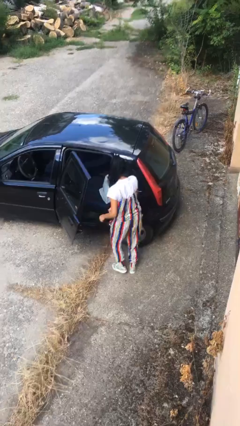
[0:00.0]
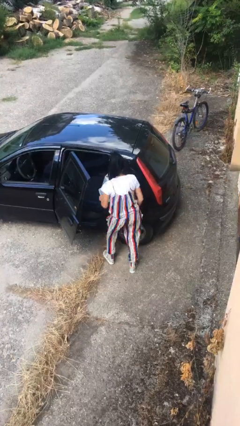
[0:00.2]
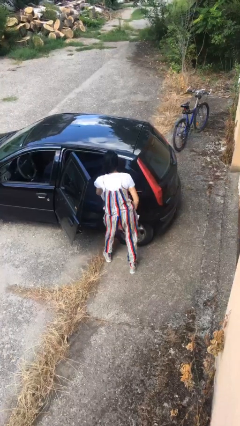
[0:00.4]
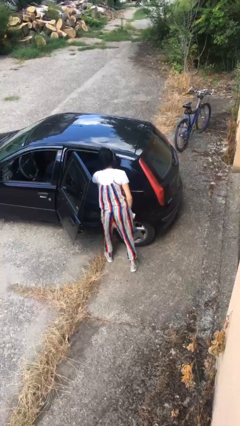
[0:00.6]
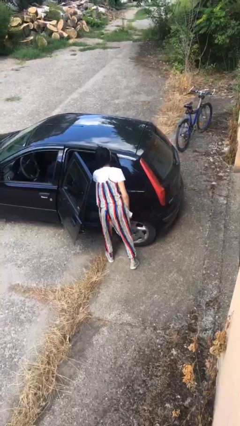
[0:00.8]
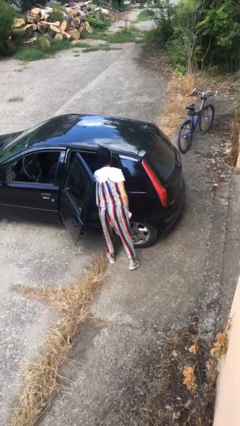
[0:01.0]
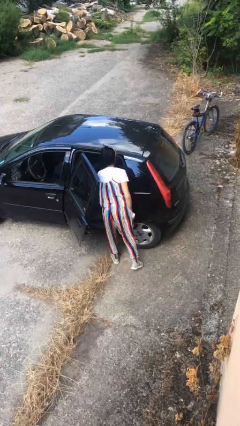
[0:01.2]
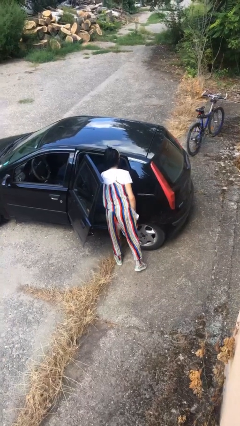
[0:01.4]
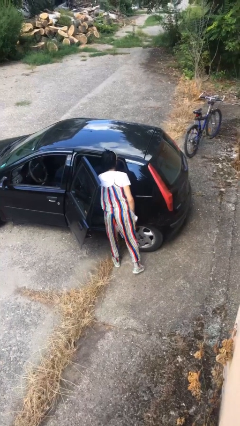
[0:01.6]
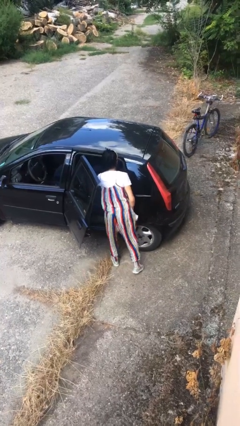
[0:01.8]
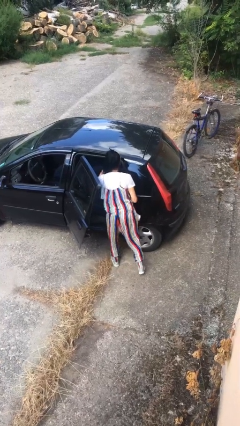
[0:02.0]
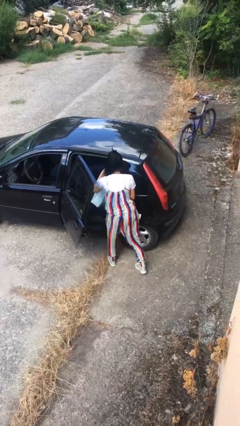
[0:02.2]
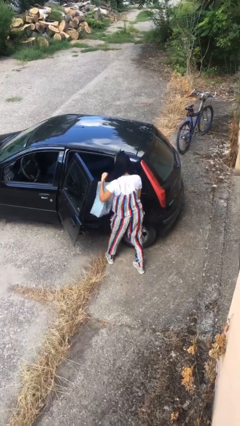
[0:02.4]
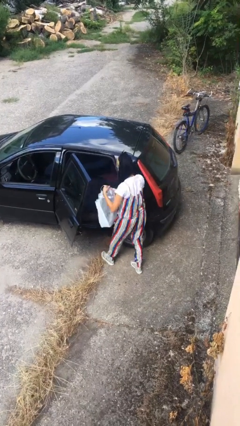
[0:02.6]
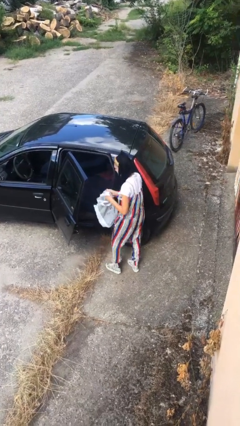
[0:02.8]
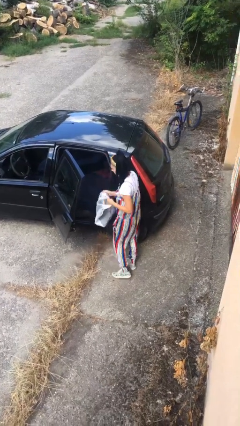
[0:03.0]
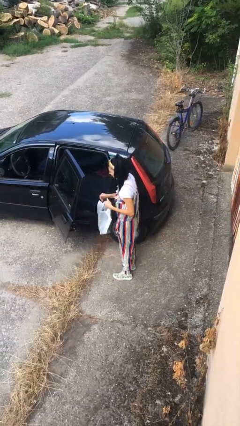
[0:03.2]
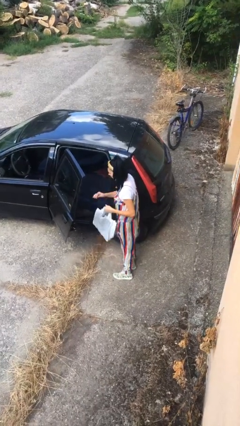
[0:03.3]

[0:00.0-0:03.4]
person unloads car

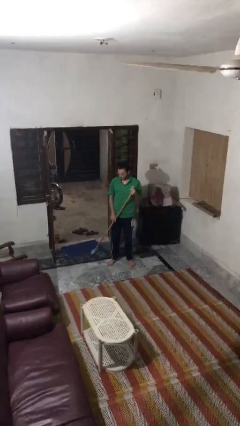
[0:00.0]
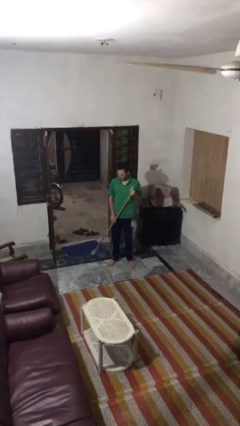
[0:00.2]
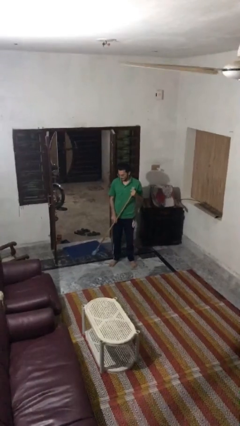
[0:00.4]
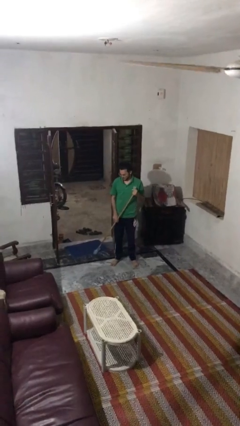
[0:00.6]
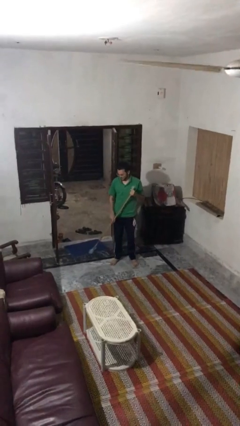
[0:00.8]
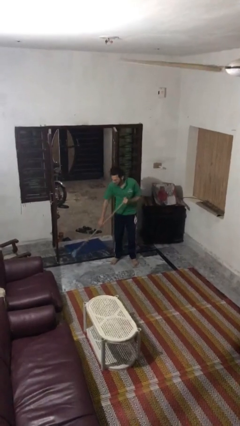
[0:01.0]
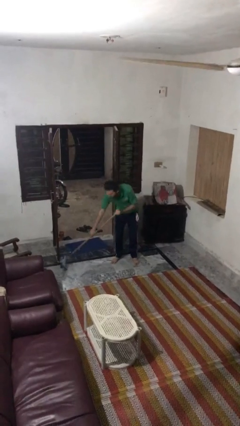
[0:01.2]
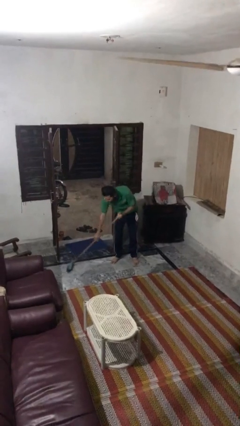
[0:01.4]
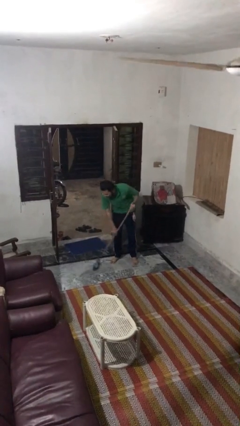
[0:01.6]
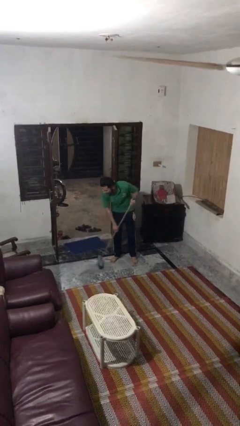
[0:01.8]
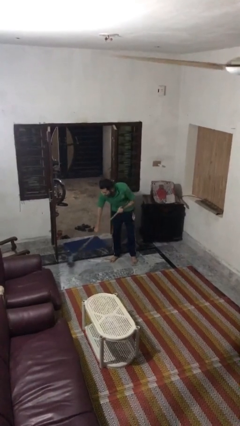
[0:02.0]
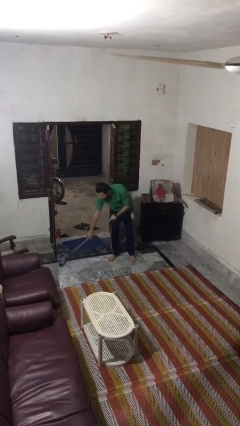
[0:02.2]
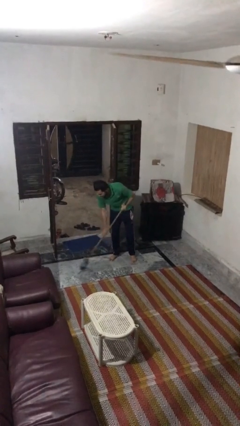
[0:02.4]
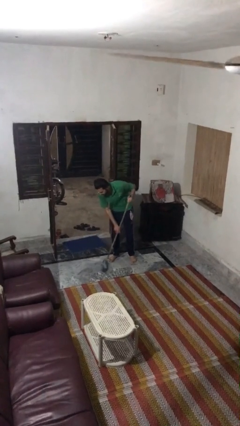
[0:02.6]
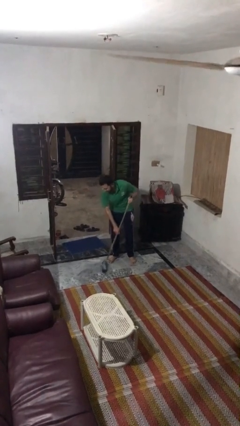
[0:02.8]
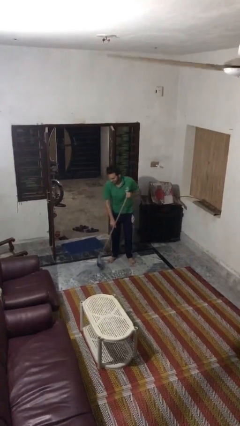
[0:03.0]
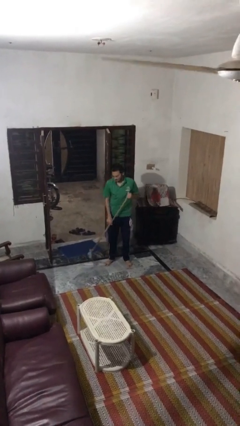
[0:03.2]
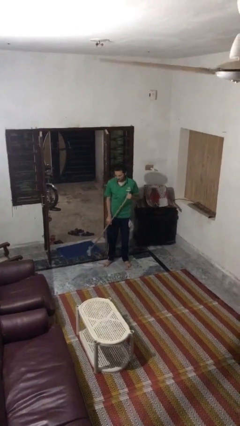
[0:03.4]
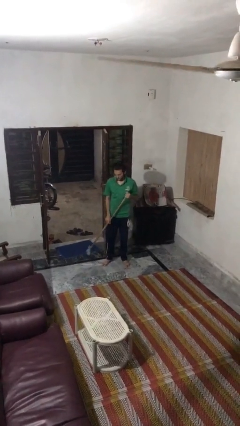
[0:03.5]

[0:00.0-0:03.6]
person sweeps floor

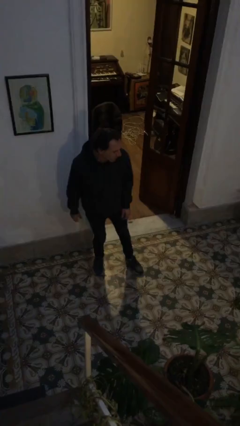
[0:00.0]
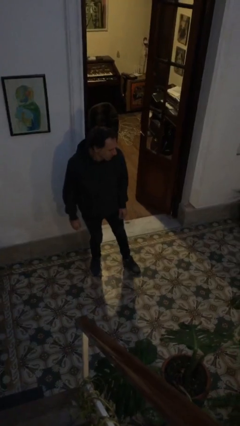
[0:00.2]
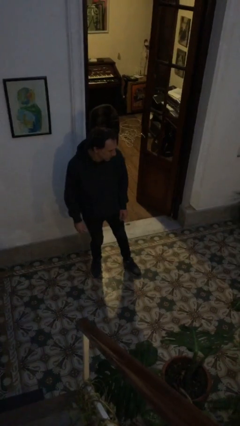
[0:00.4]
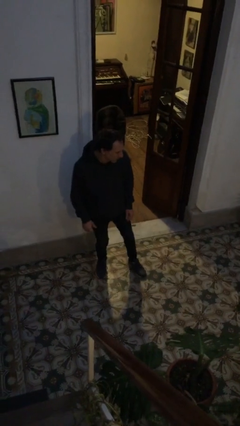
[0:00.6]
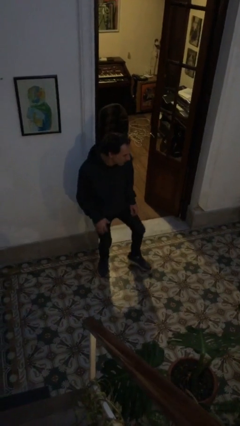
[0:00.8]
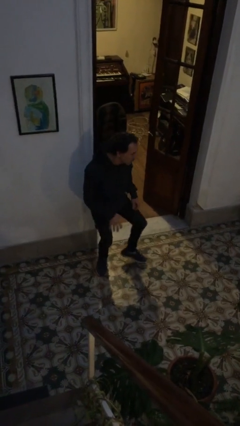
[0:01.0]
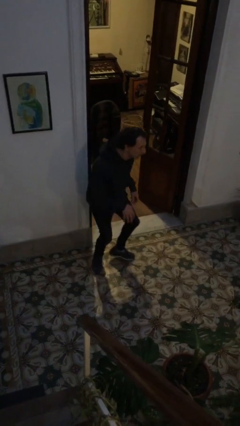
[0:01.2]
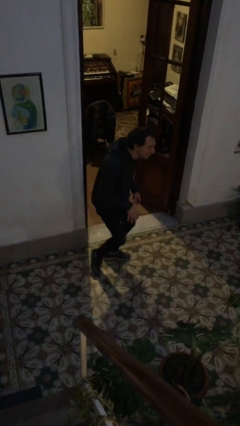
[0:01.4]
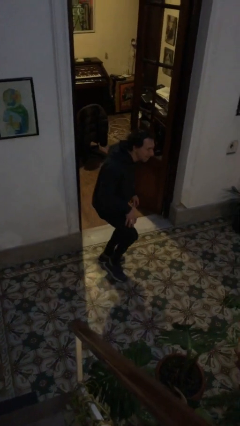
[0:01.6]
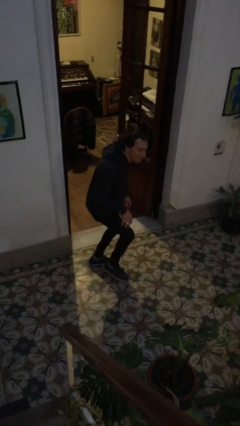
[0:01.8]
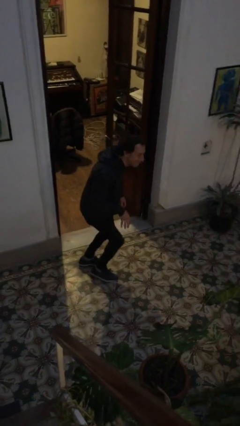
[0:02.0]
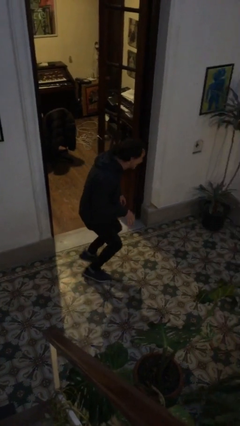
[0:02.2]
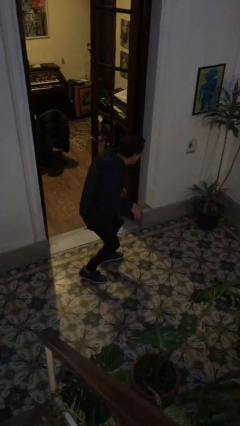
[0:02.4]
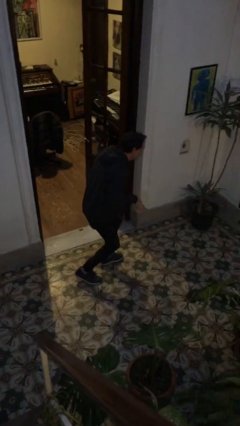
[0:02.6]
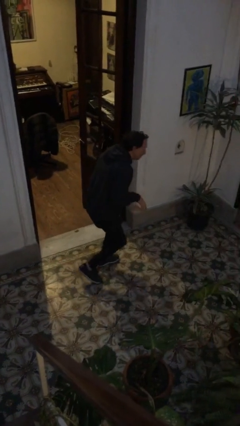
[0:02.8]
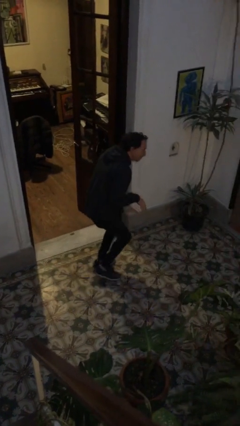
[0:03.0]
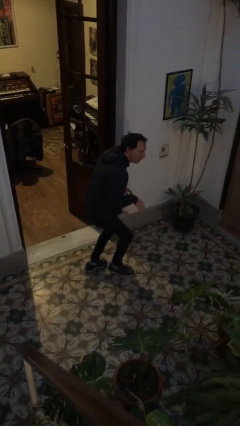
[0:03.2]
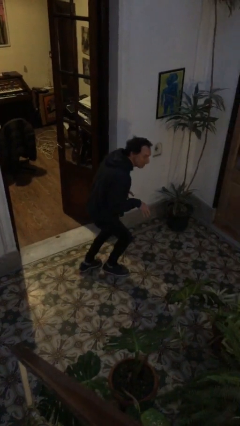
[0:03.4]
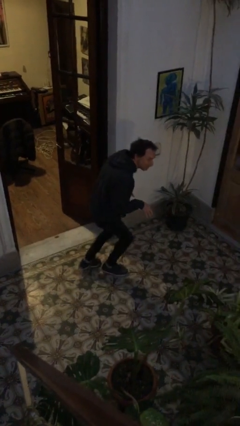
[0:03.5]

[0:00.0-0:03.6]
person walks tiptoe

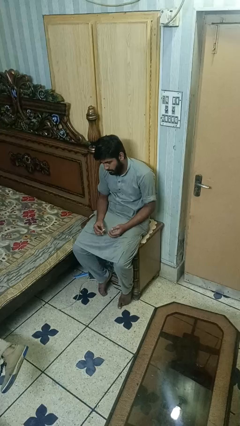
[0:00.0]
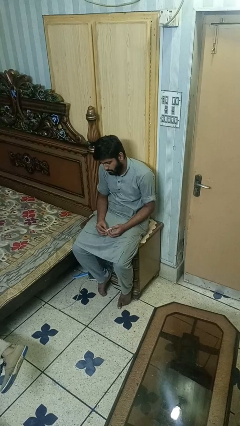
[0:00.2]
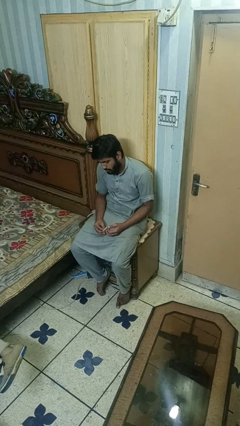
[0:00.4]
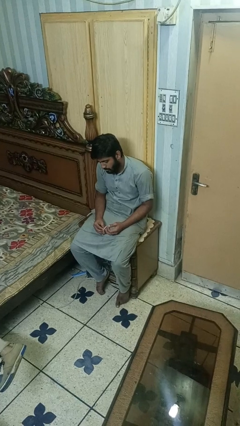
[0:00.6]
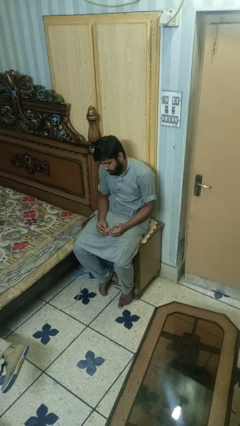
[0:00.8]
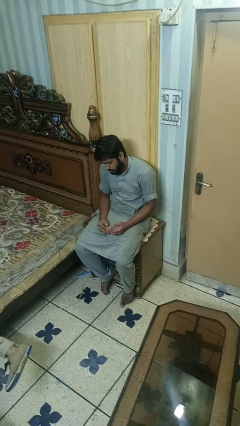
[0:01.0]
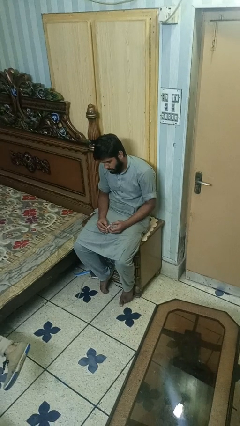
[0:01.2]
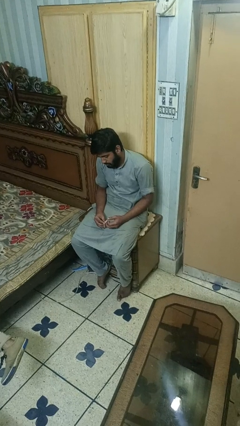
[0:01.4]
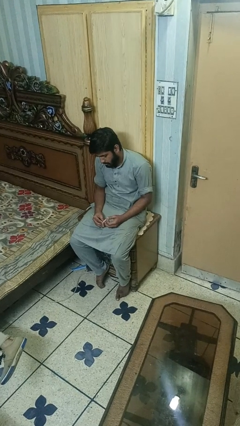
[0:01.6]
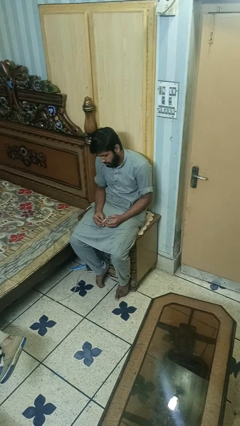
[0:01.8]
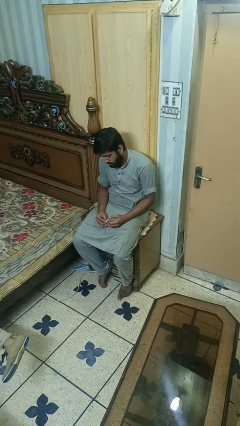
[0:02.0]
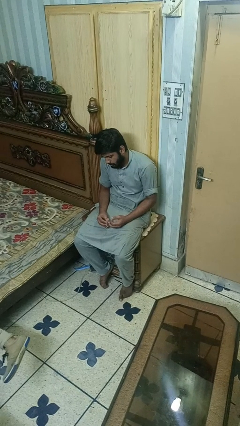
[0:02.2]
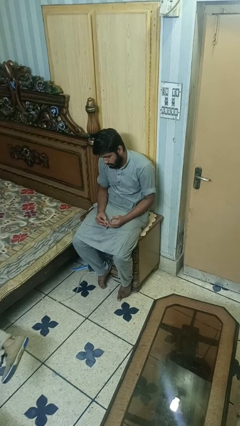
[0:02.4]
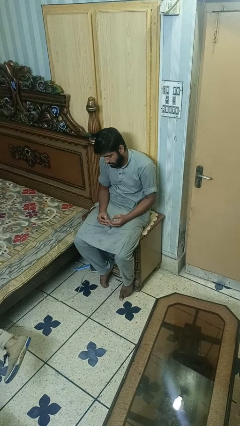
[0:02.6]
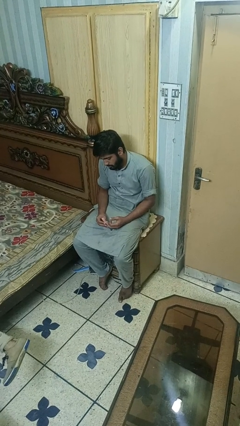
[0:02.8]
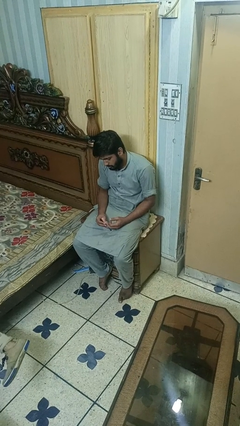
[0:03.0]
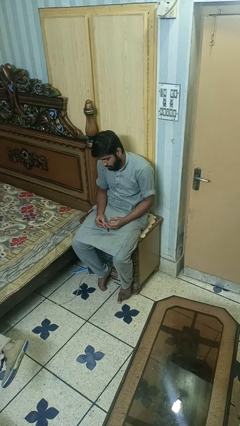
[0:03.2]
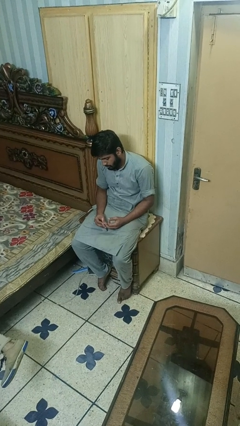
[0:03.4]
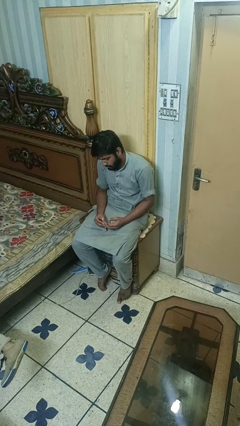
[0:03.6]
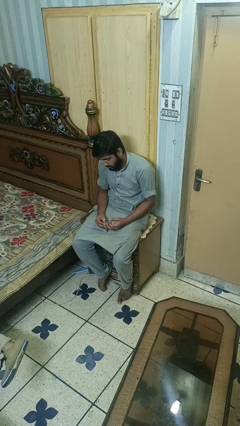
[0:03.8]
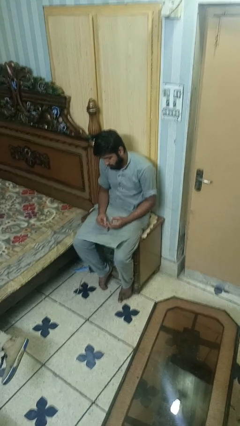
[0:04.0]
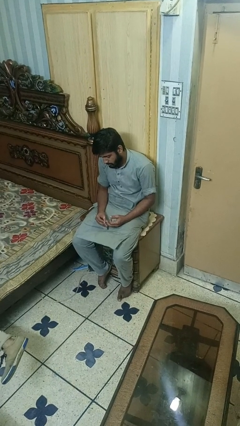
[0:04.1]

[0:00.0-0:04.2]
person files fingernails

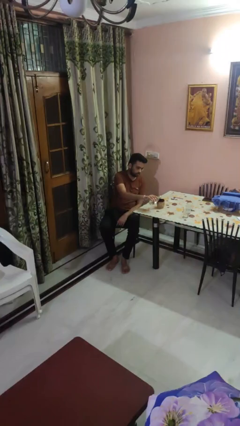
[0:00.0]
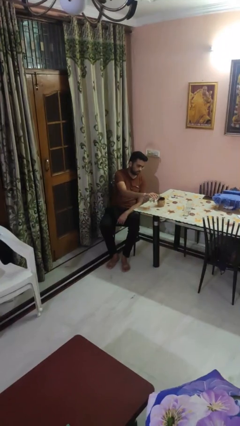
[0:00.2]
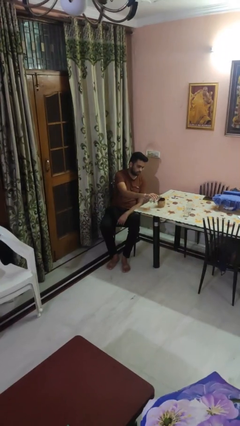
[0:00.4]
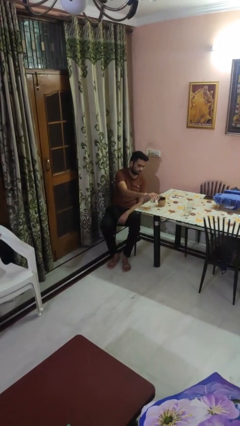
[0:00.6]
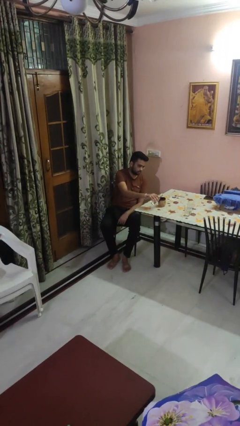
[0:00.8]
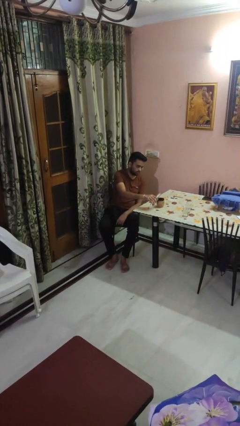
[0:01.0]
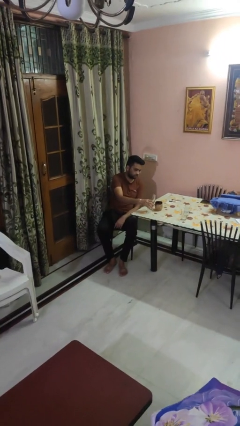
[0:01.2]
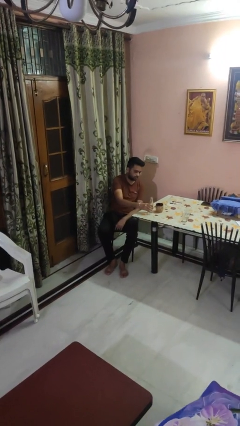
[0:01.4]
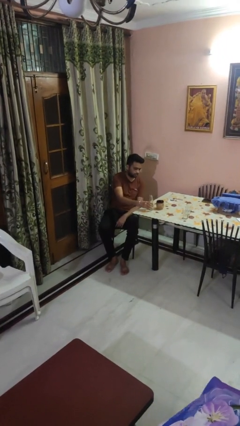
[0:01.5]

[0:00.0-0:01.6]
person pours liquid into cup

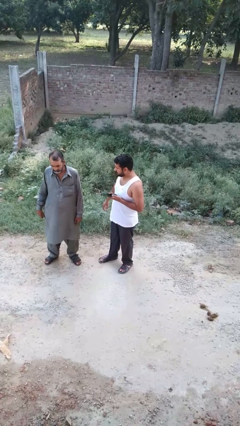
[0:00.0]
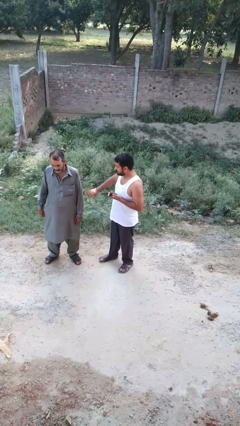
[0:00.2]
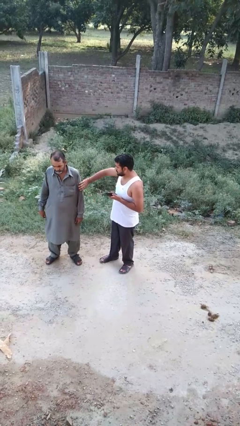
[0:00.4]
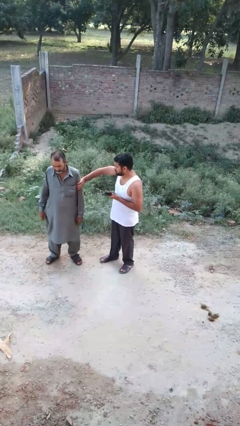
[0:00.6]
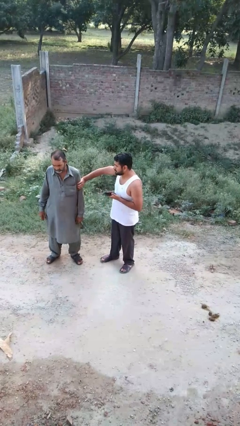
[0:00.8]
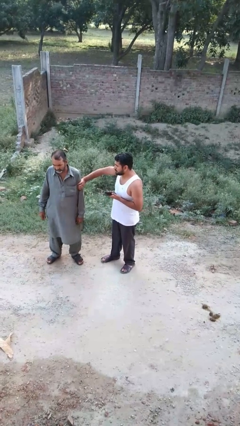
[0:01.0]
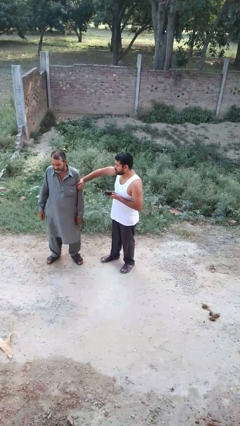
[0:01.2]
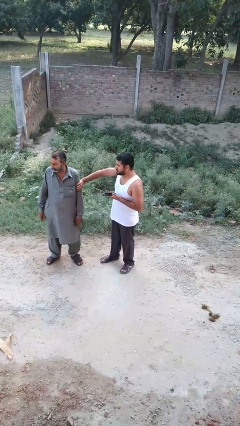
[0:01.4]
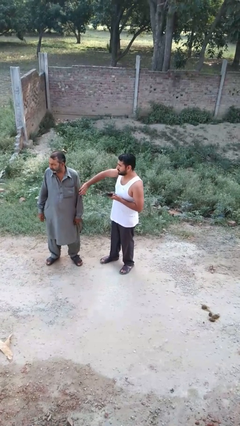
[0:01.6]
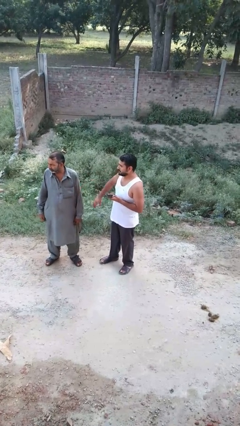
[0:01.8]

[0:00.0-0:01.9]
person grabs person by bicep
